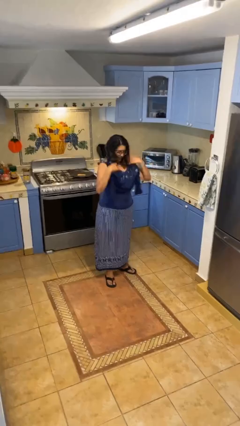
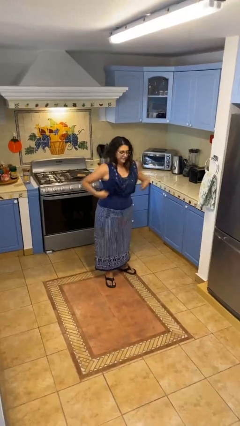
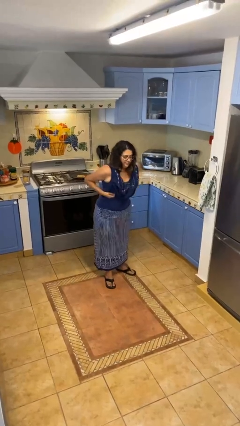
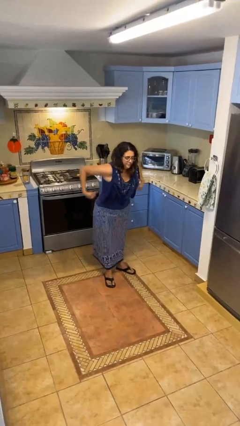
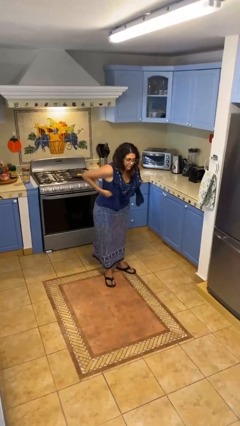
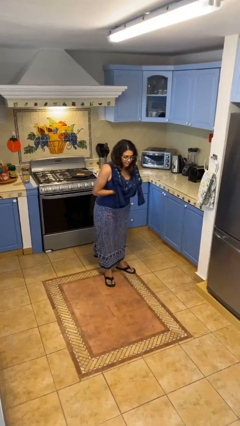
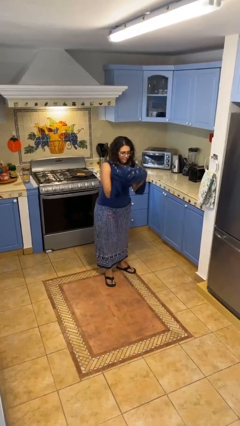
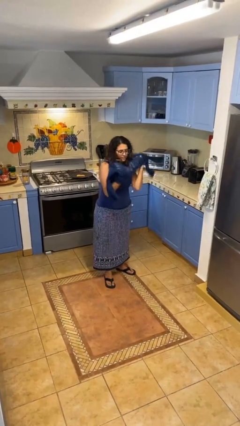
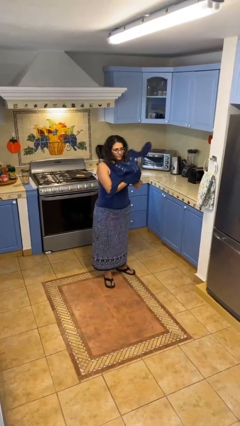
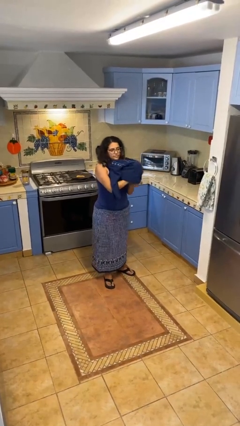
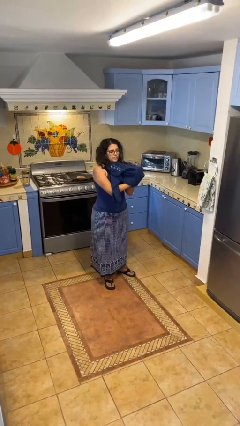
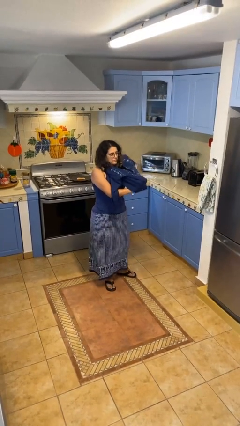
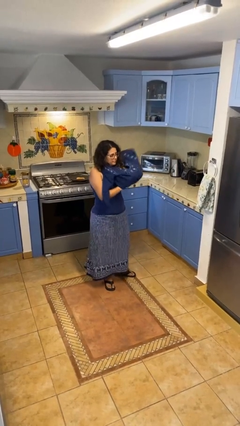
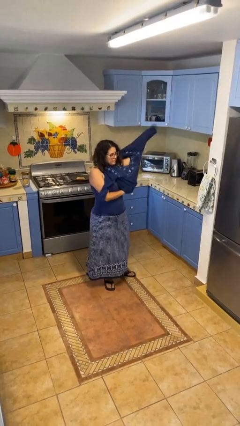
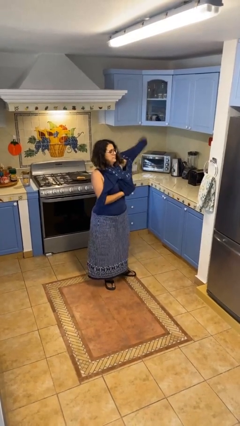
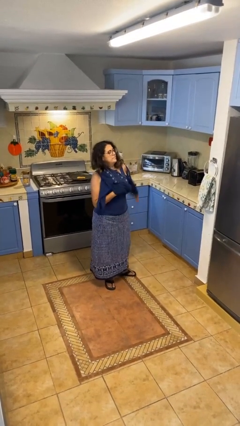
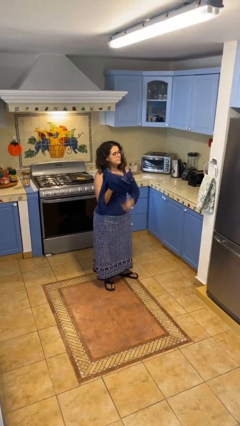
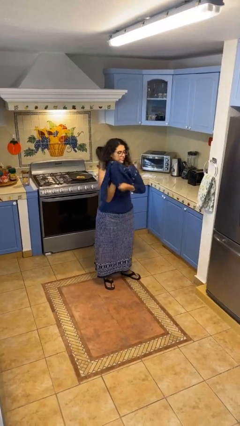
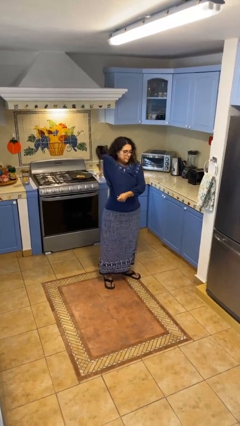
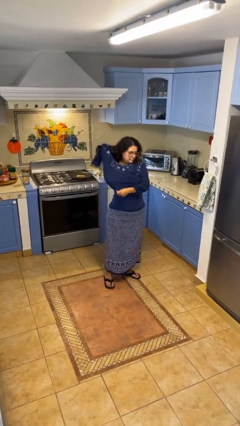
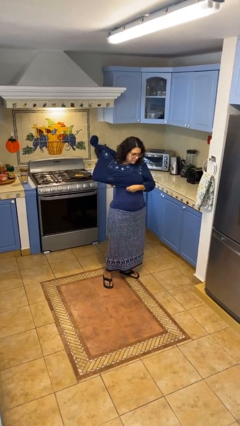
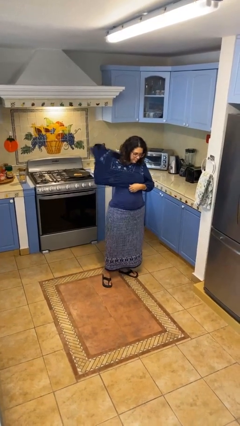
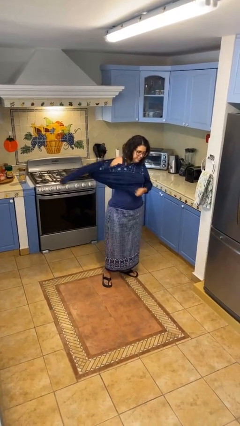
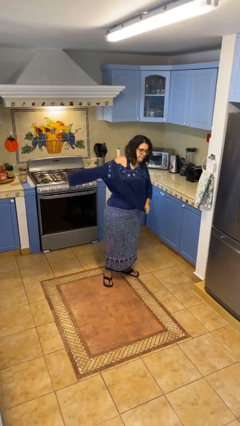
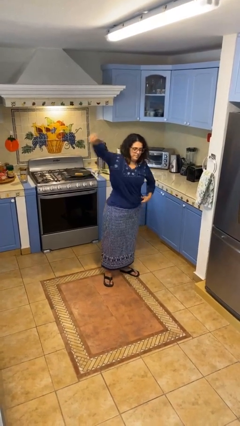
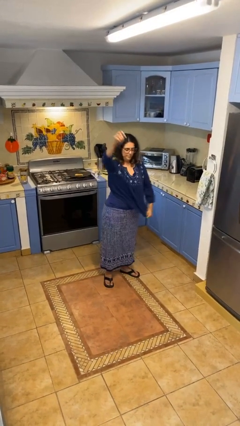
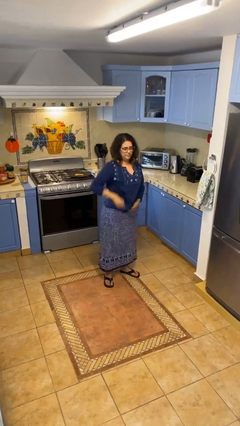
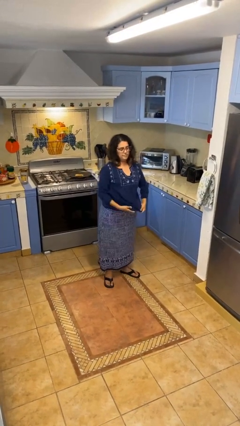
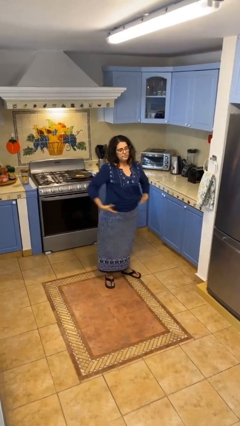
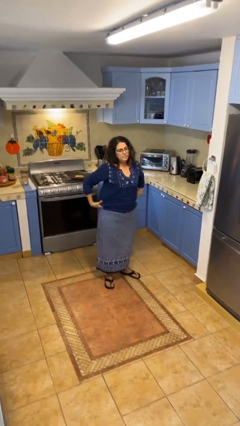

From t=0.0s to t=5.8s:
person puts on shirt

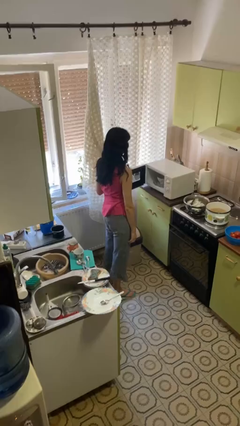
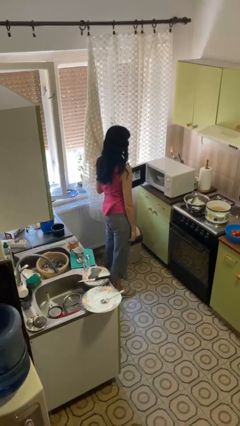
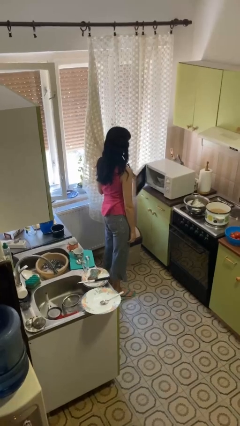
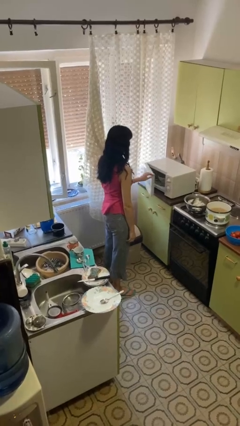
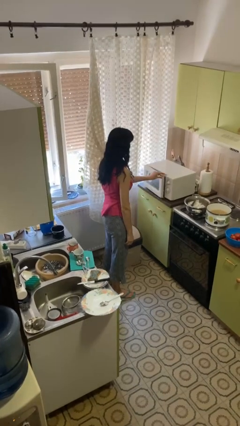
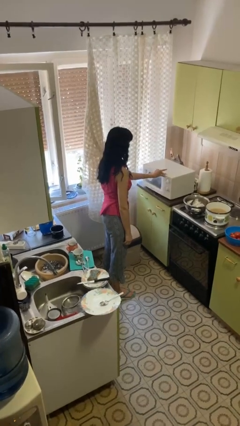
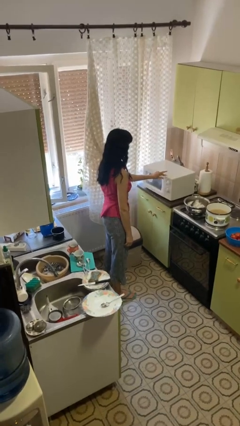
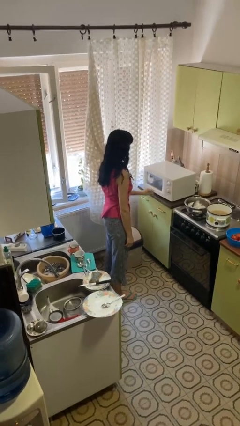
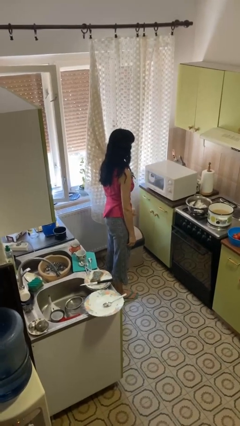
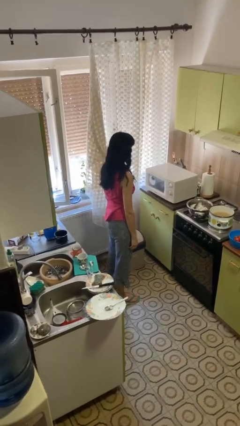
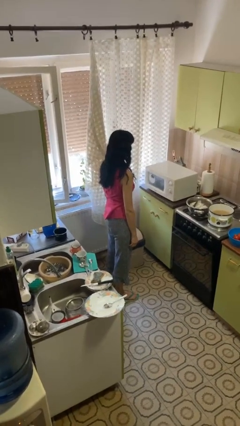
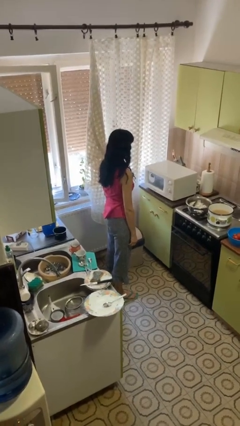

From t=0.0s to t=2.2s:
person closes microwave

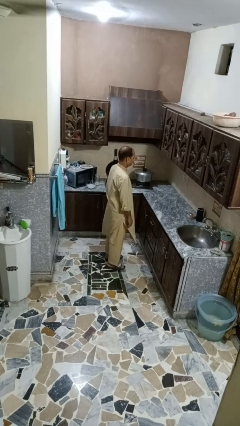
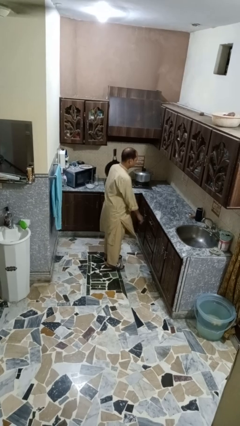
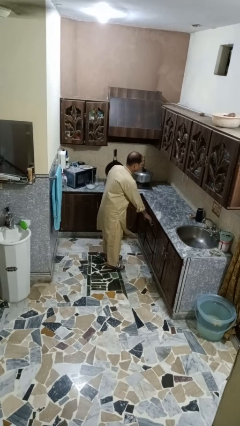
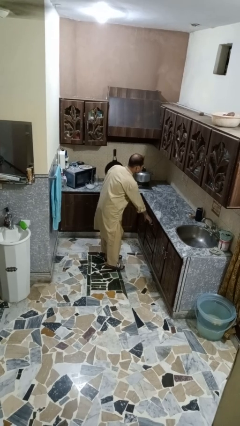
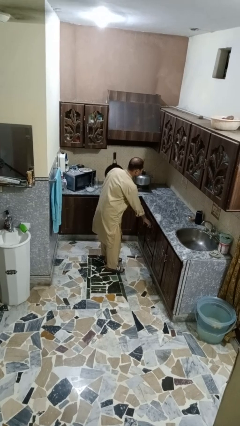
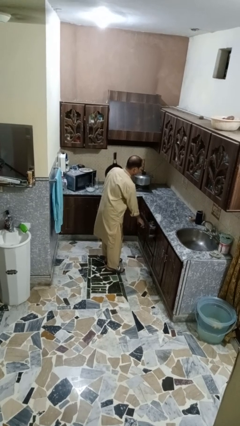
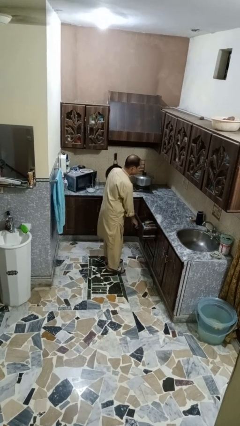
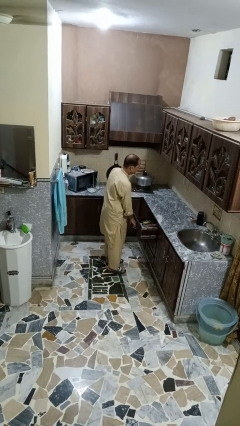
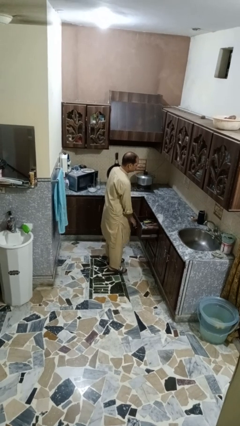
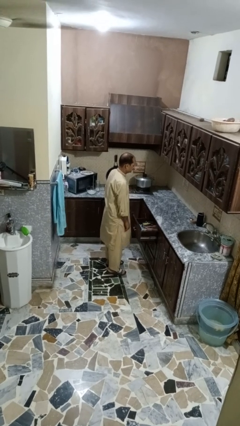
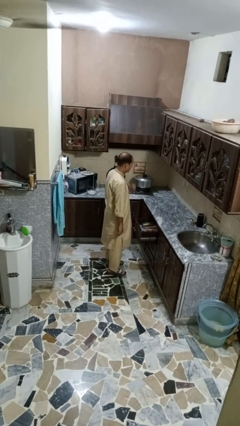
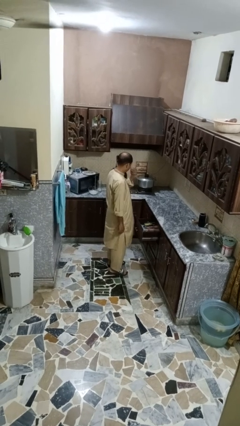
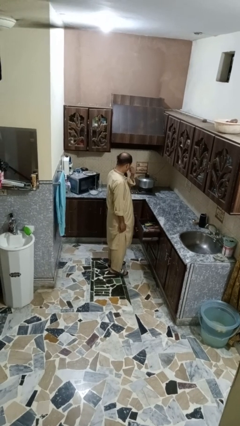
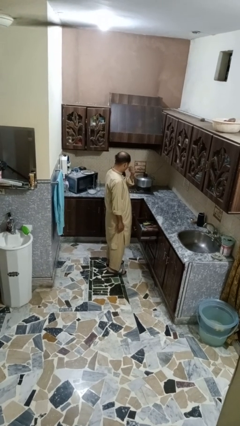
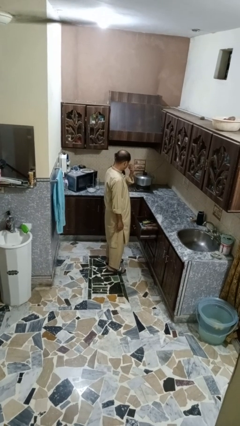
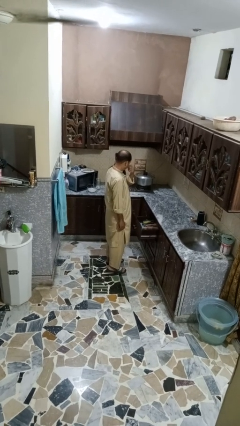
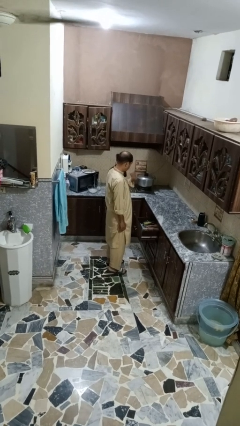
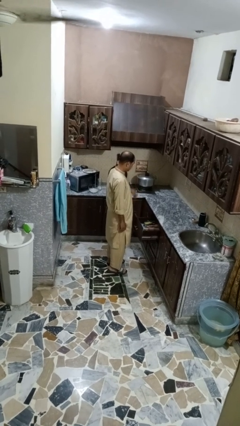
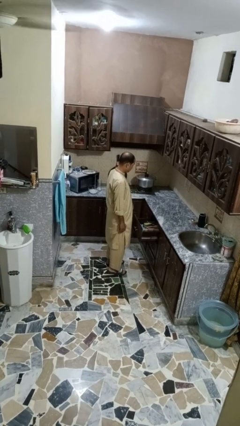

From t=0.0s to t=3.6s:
person opens kitchen drawer

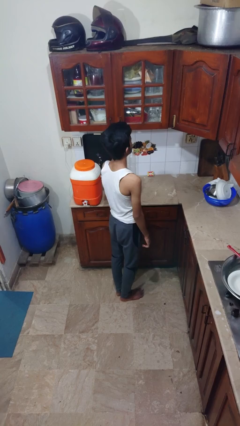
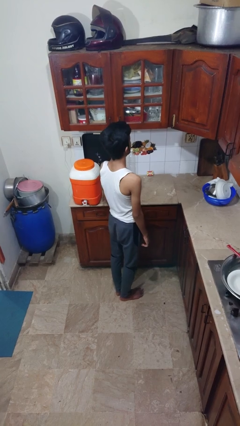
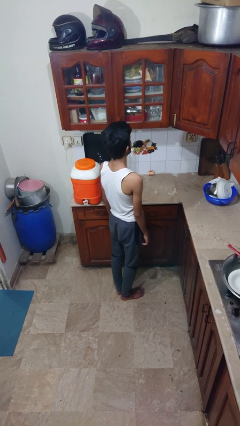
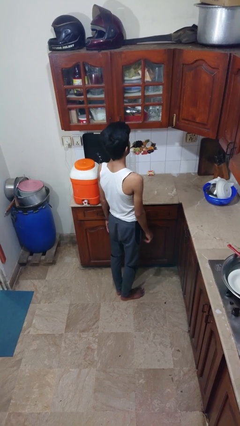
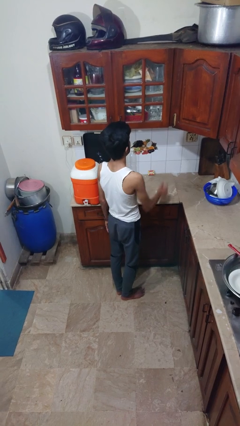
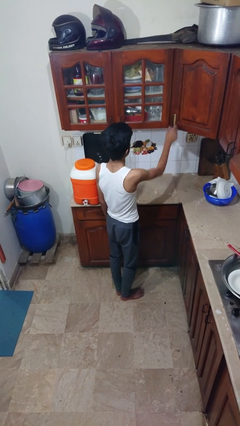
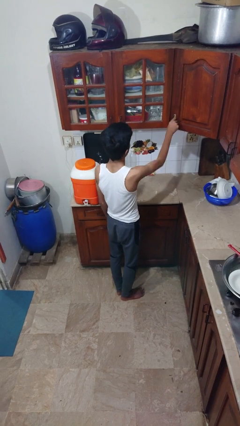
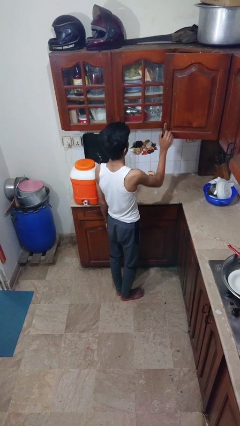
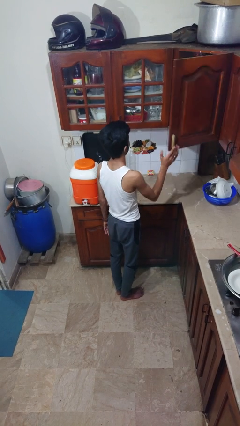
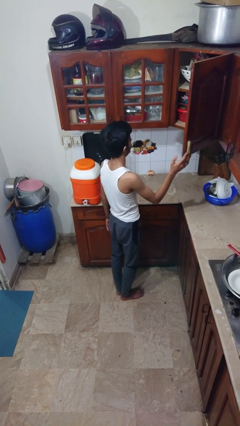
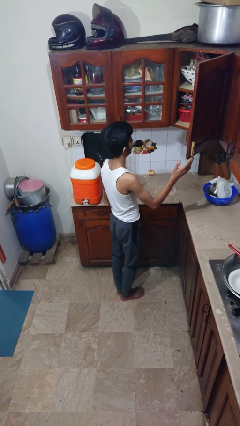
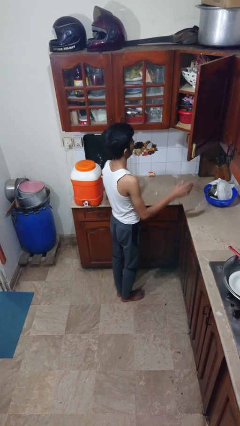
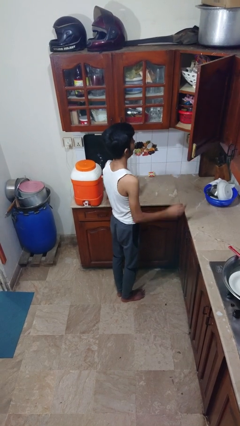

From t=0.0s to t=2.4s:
person closes cabinet

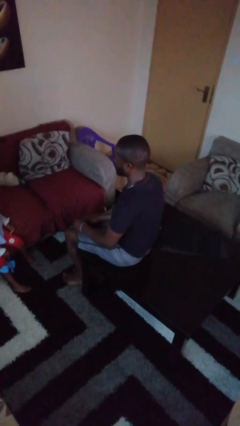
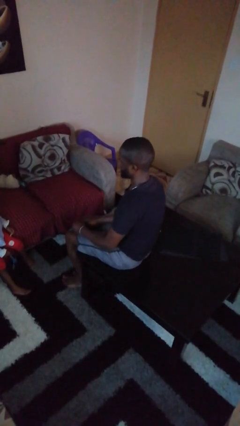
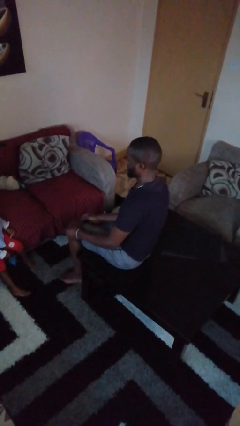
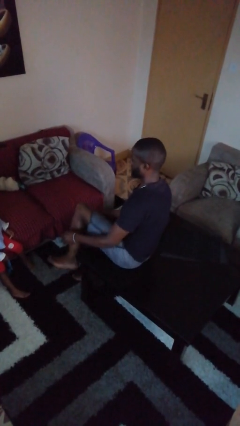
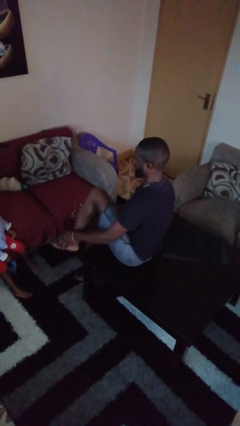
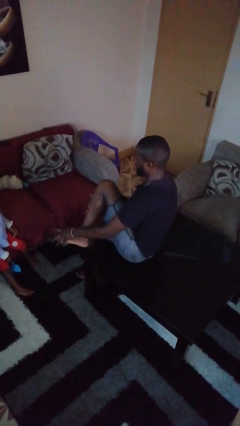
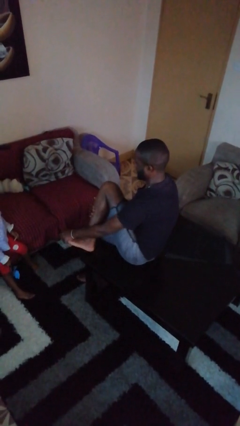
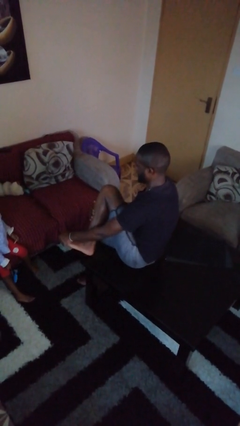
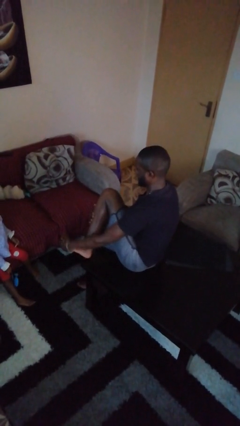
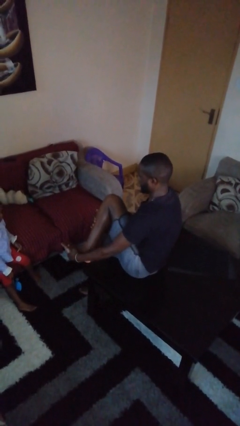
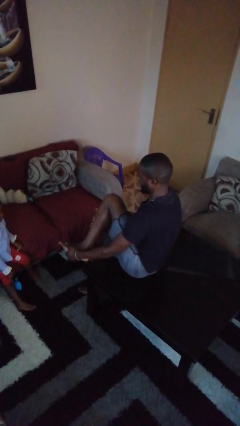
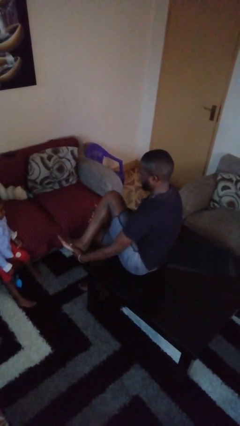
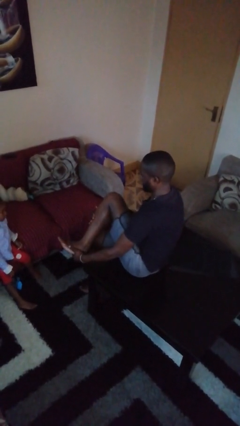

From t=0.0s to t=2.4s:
person rubs foot

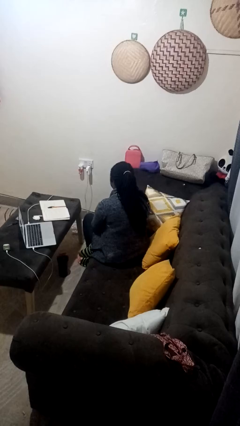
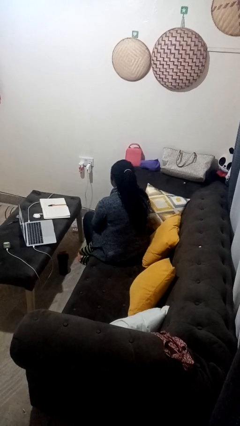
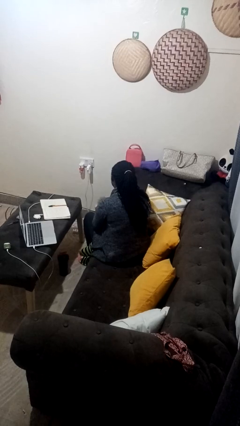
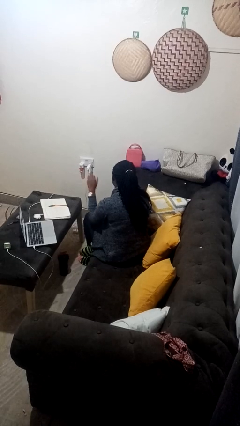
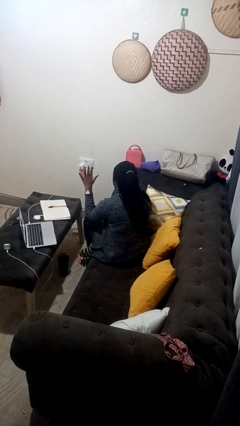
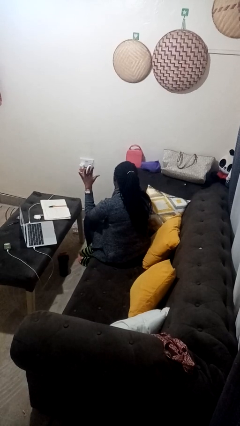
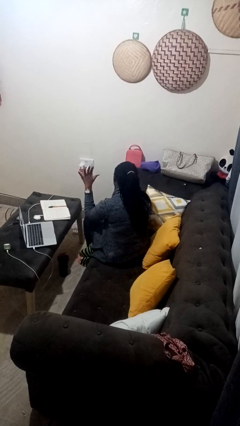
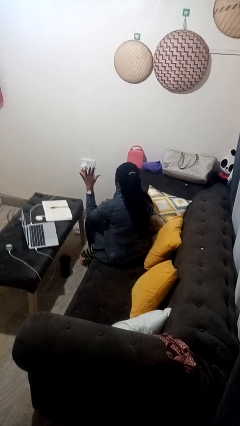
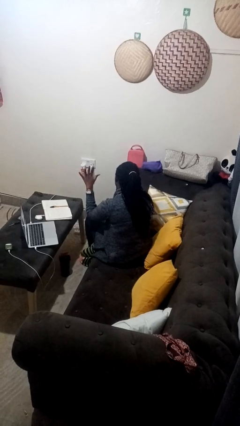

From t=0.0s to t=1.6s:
person gestures number five
